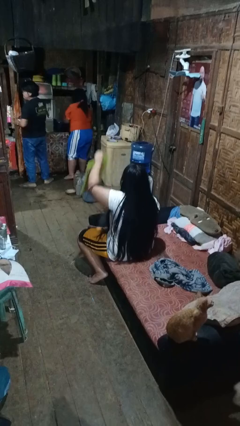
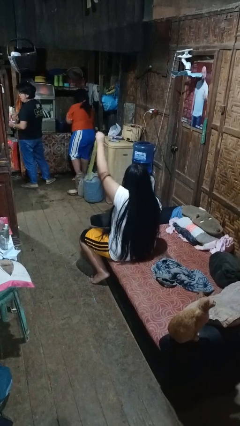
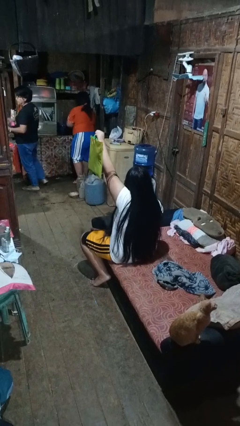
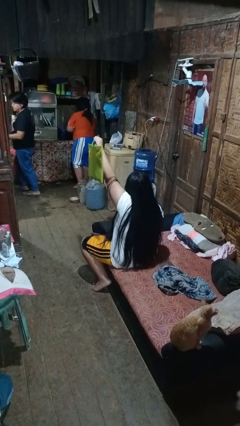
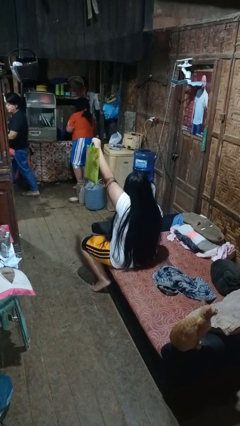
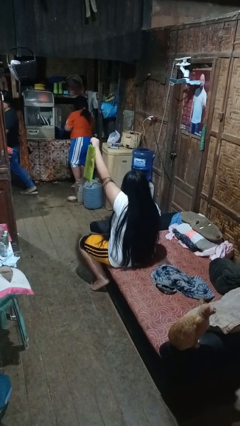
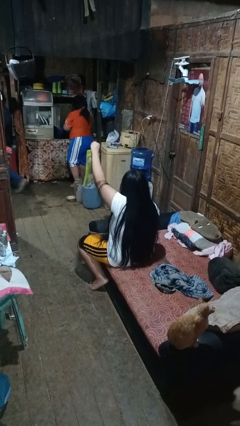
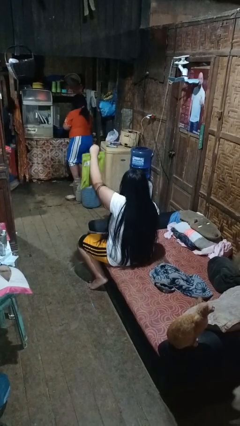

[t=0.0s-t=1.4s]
person holds object above head

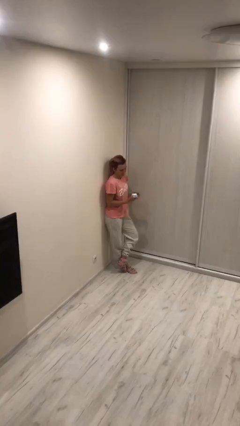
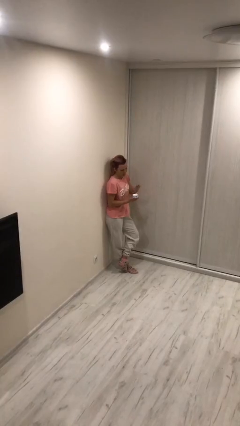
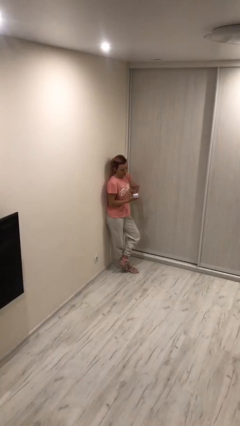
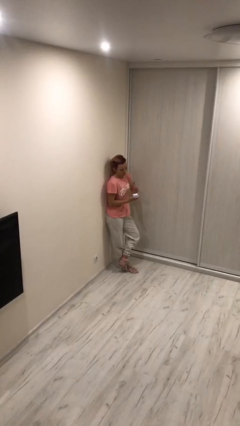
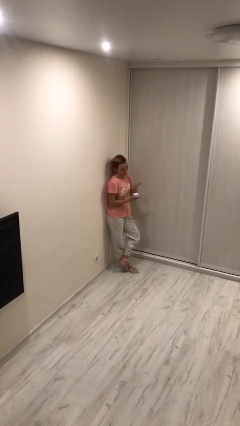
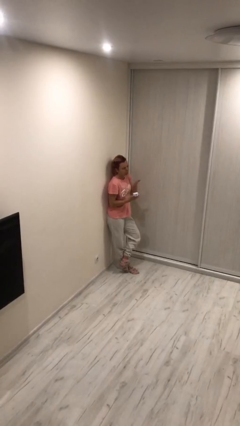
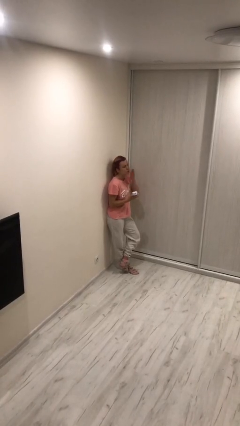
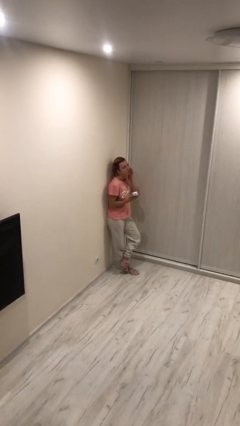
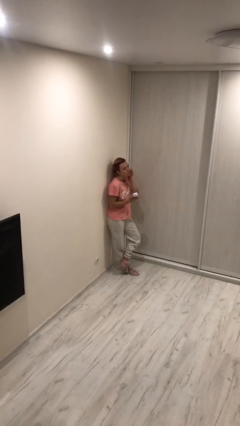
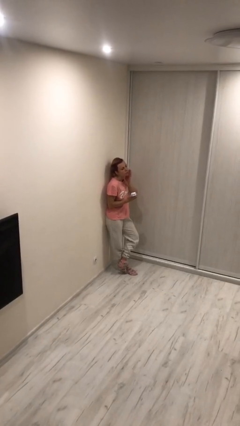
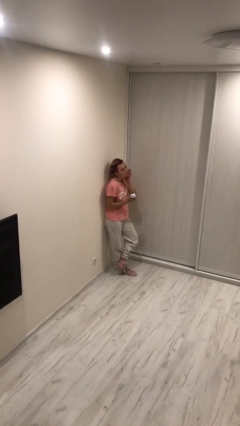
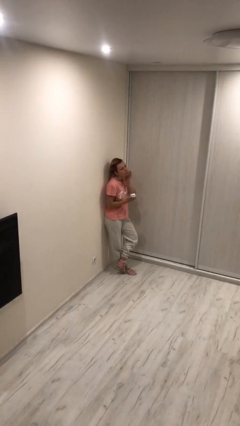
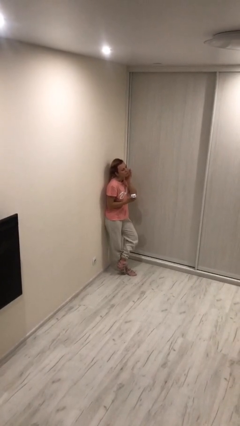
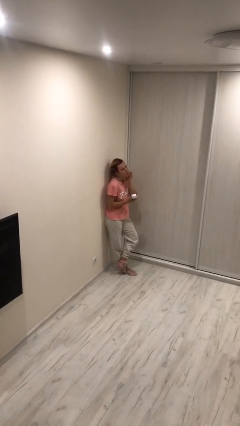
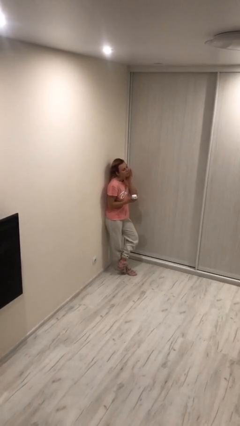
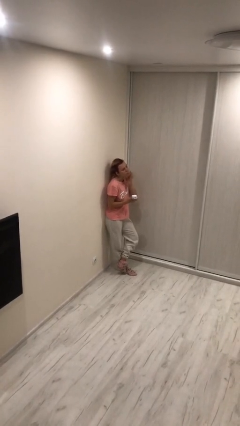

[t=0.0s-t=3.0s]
person applies facial moisturizer

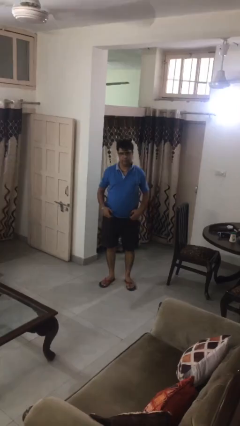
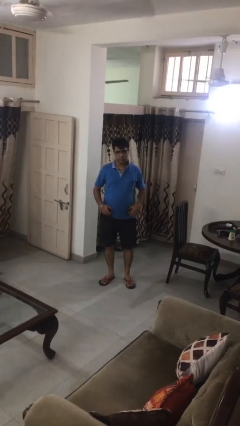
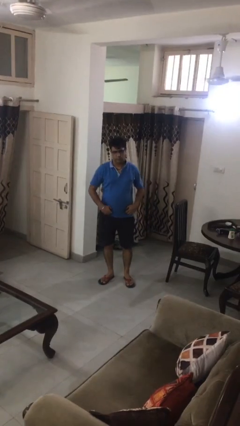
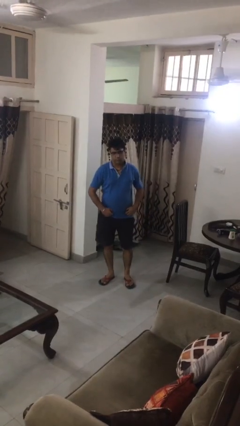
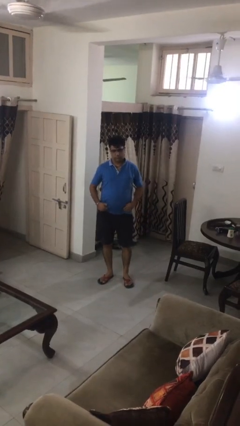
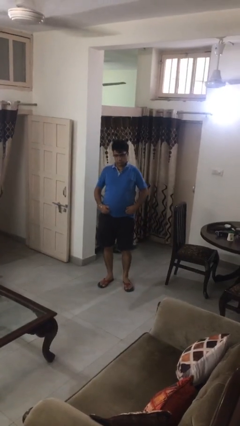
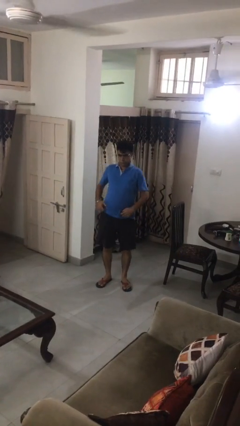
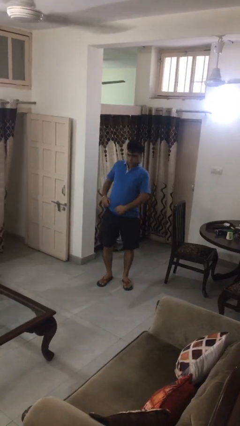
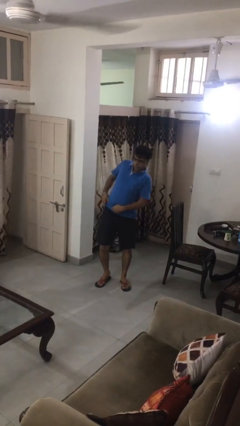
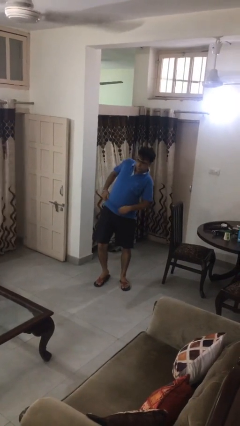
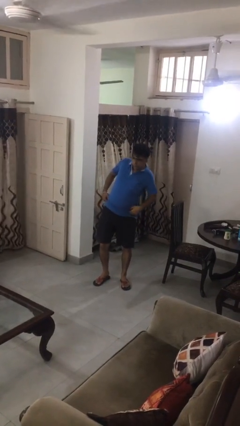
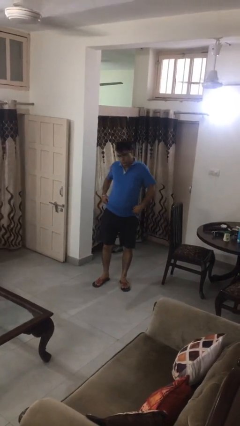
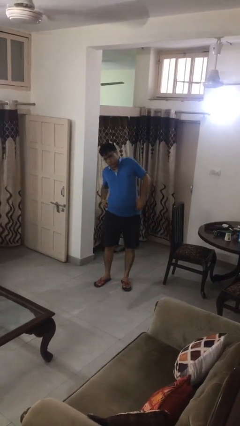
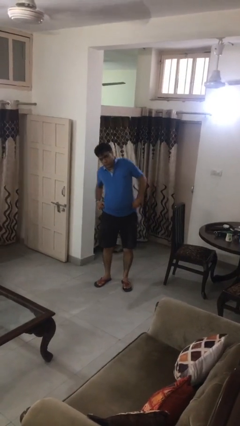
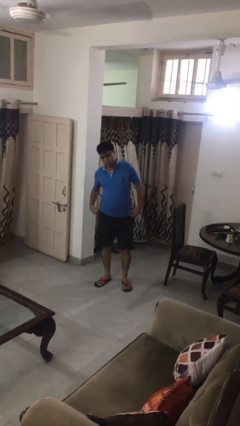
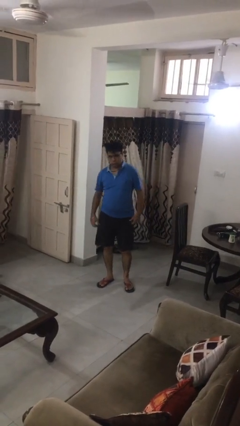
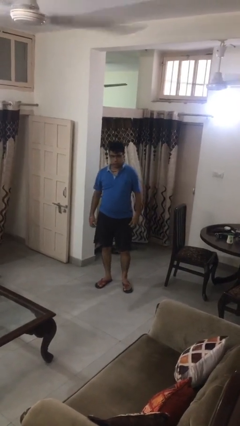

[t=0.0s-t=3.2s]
person hikes up pants

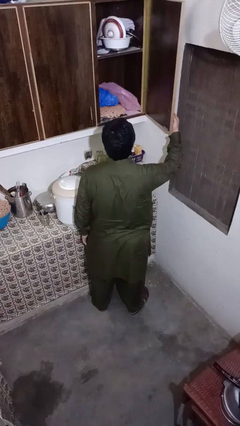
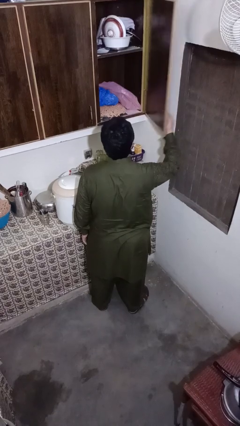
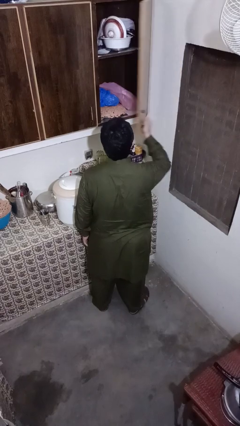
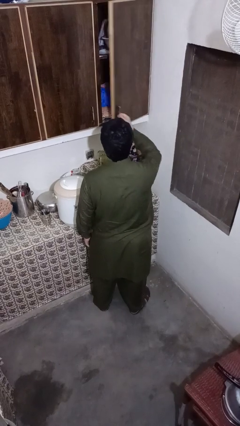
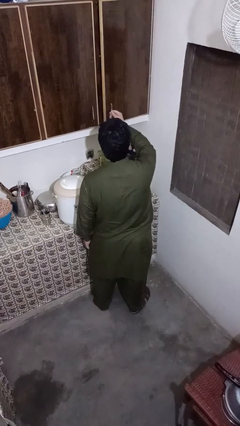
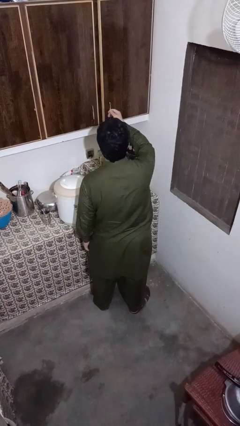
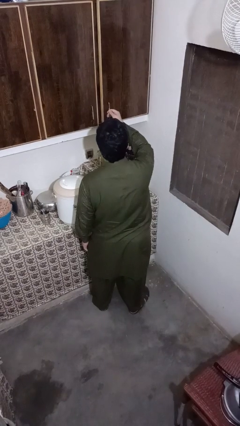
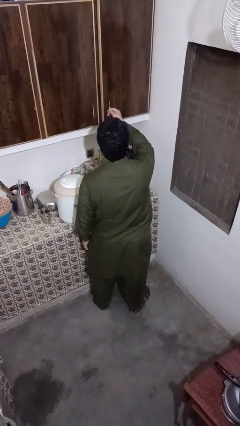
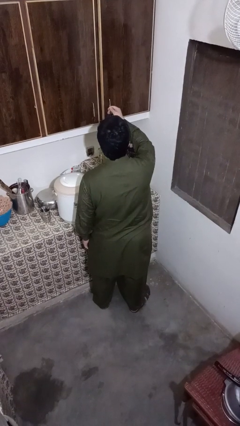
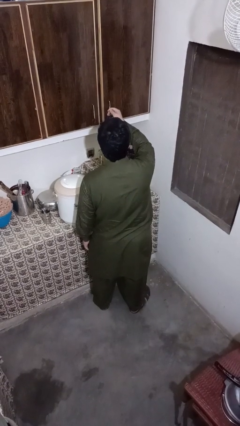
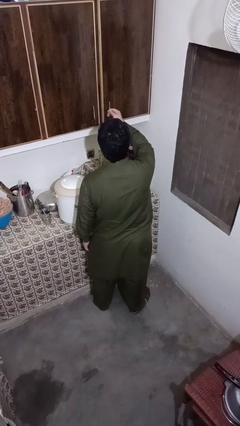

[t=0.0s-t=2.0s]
person closes kitchen drawer

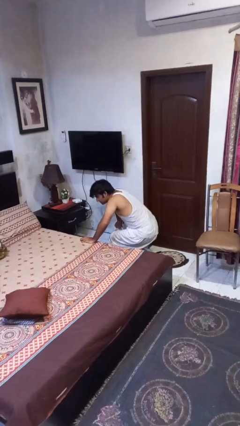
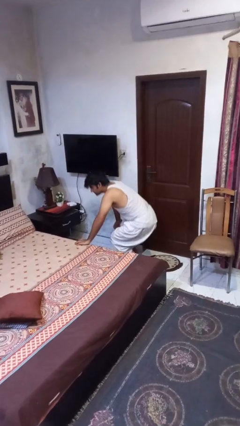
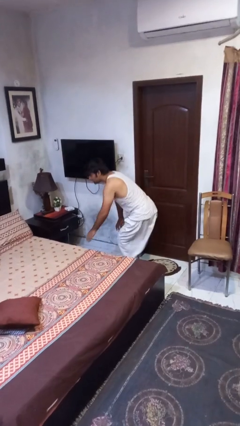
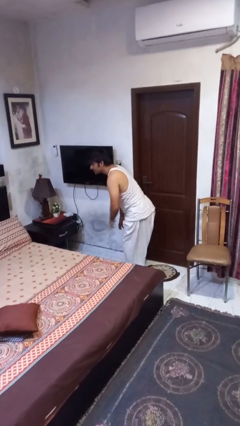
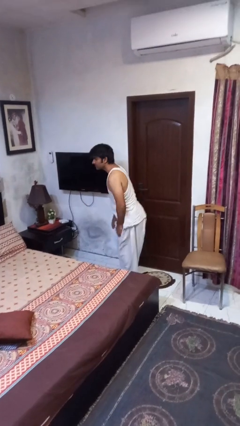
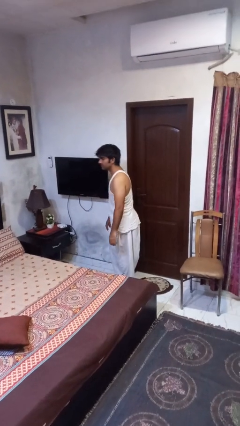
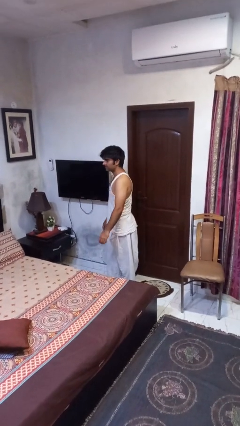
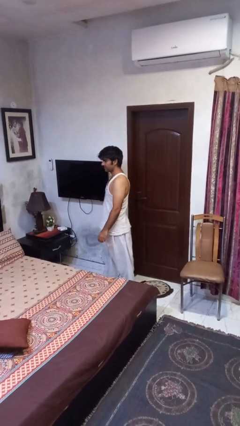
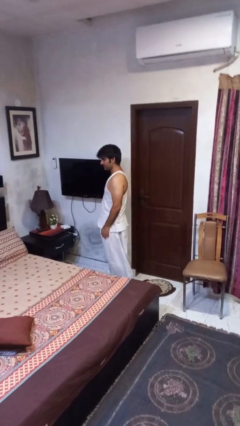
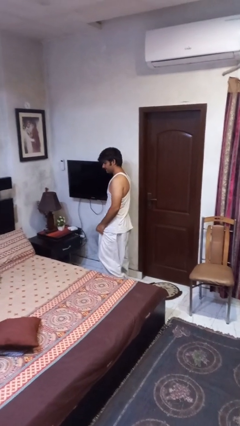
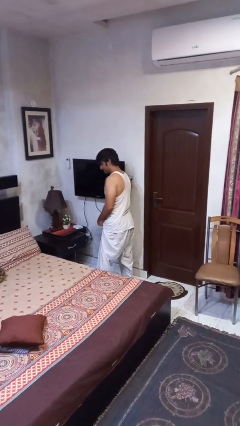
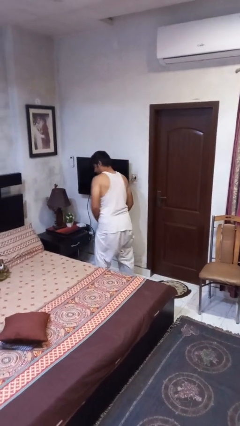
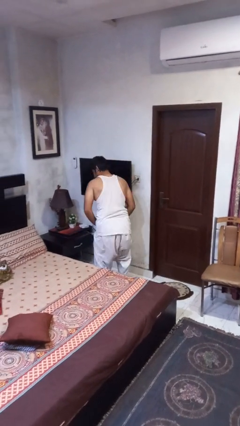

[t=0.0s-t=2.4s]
person stands up from floor

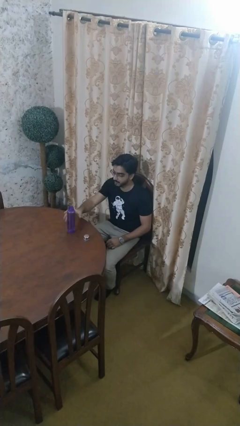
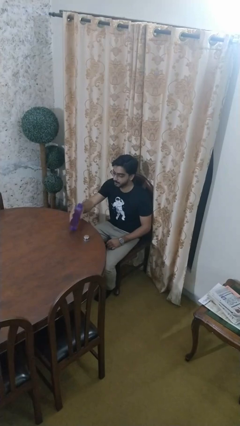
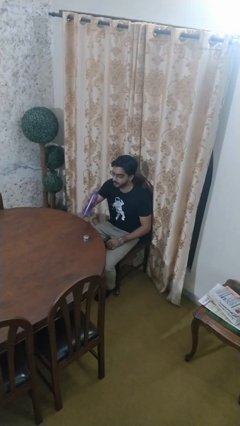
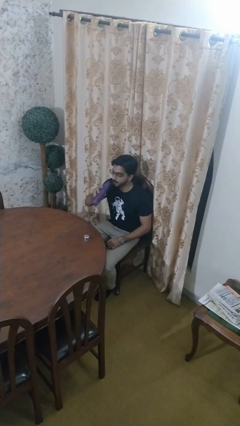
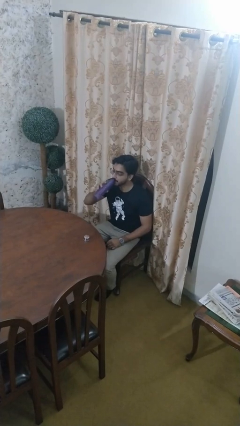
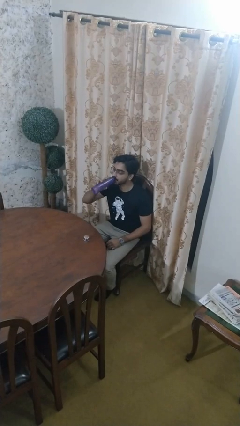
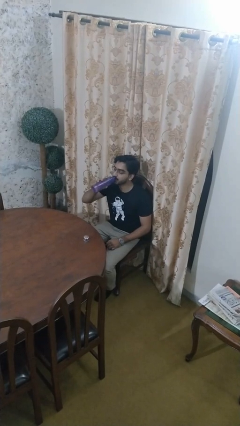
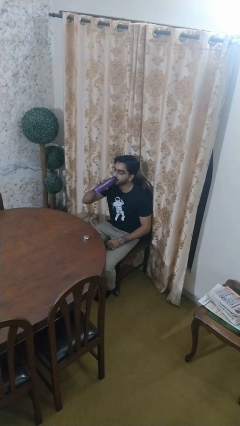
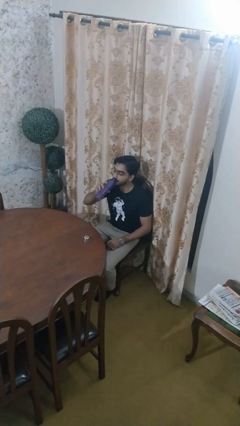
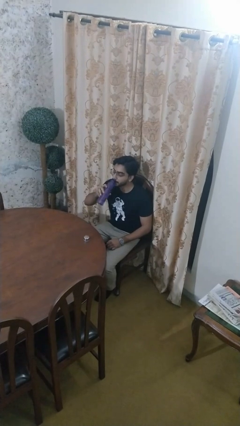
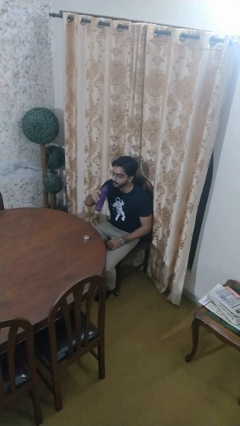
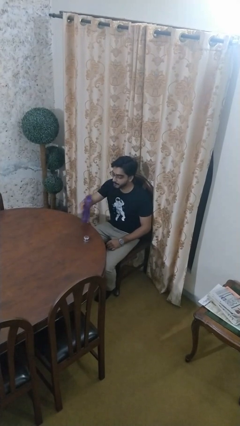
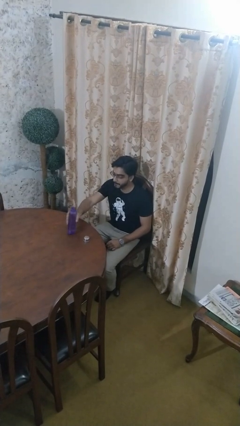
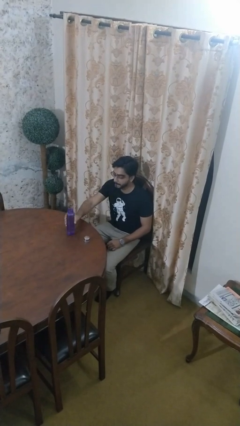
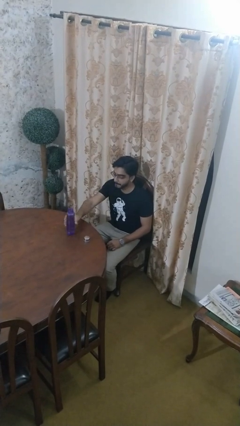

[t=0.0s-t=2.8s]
person drinks from bottle

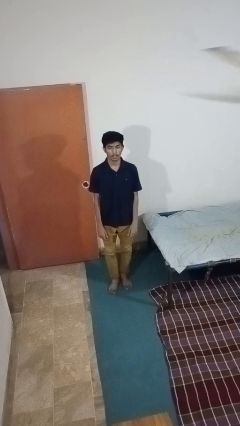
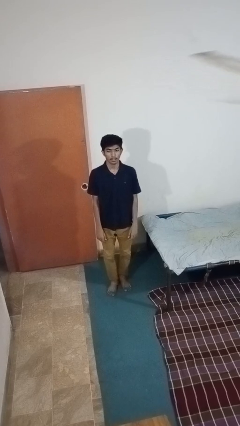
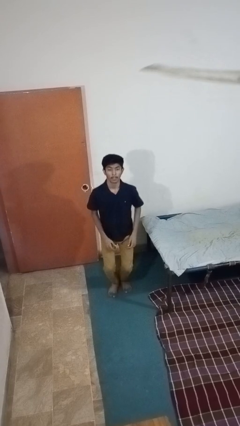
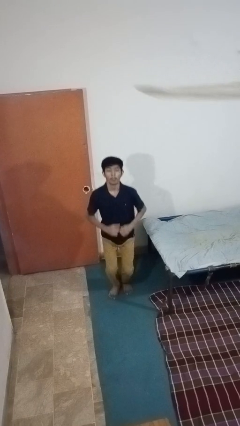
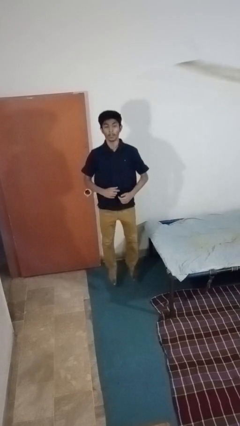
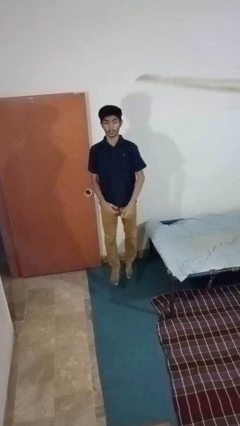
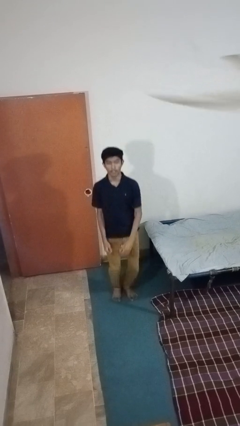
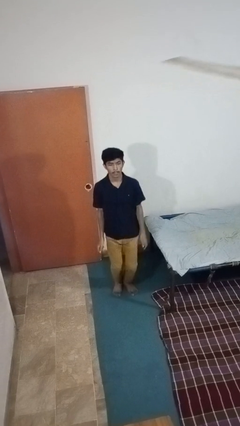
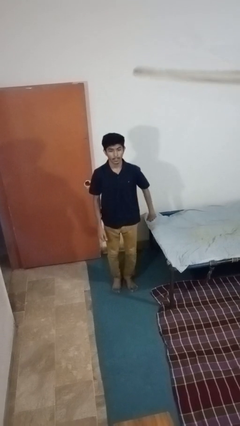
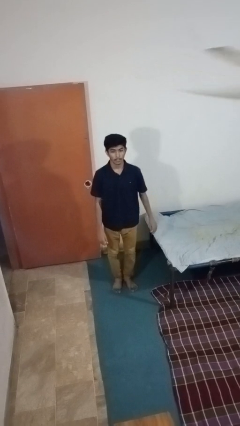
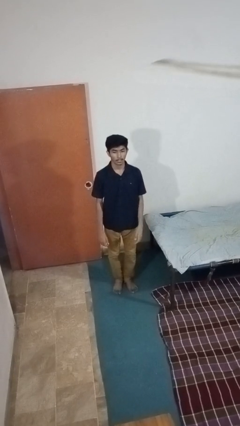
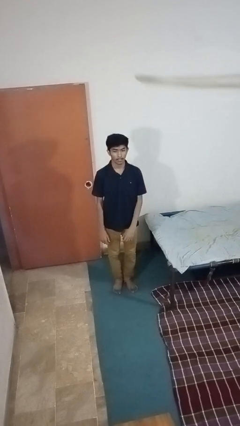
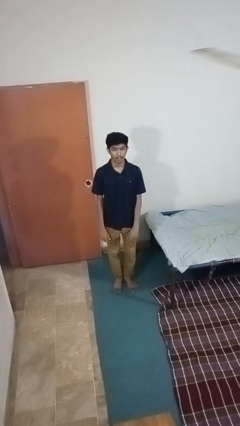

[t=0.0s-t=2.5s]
person jumps
